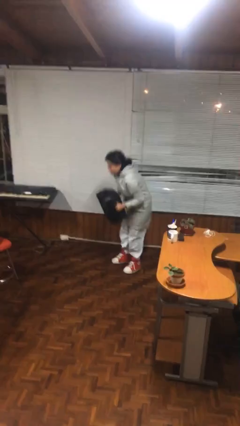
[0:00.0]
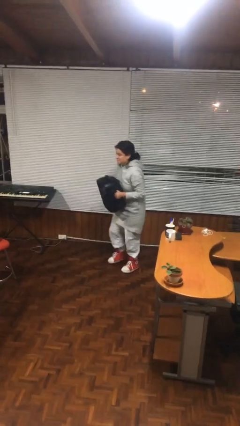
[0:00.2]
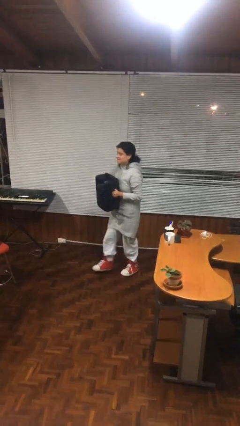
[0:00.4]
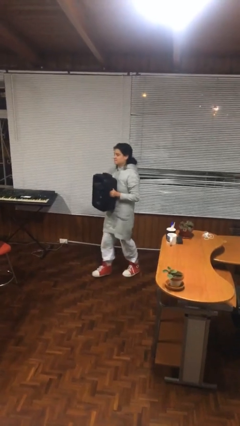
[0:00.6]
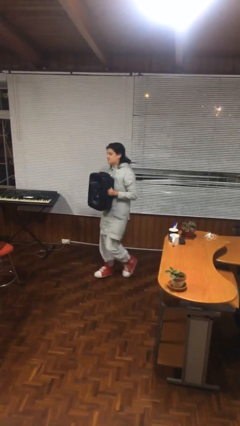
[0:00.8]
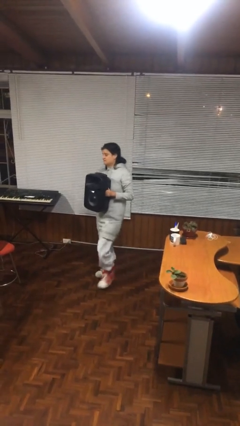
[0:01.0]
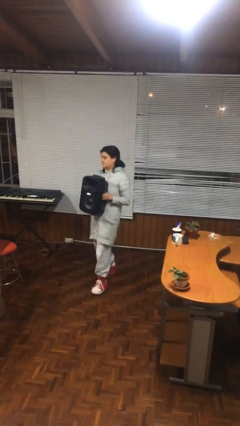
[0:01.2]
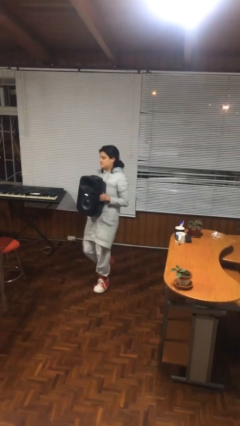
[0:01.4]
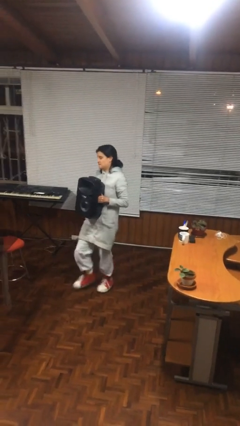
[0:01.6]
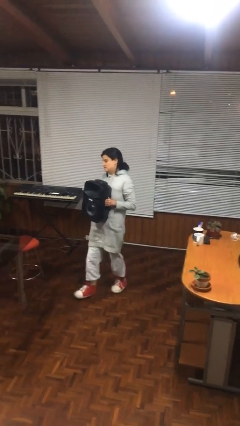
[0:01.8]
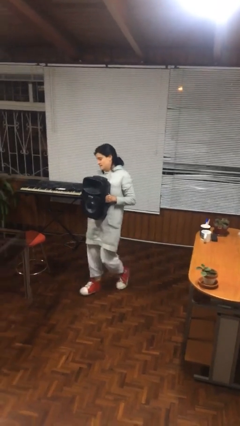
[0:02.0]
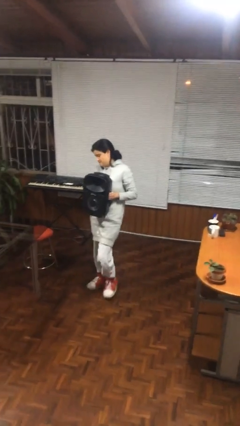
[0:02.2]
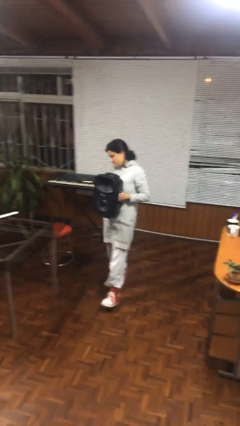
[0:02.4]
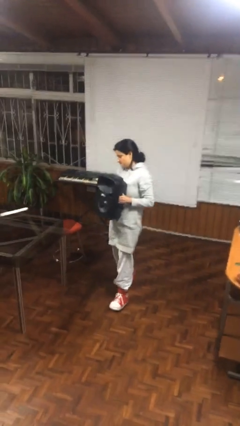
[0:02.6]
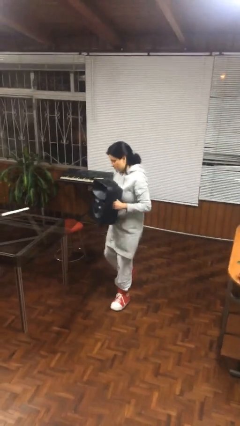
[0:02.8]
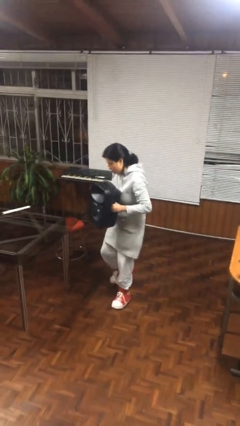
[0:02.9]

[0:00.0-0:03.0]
person carries heavy object

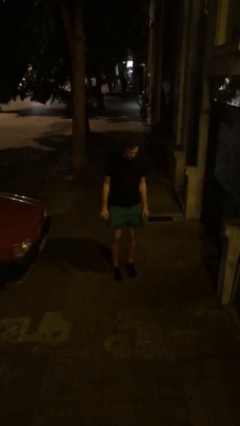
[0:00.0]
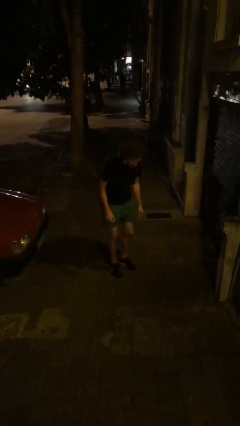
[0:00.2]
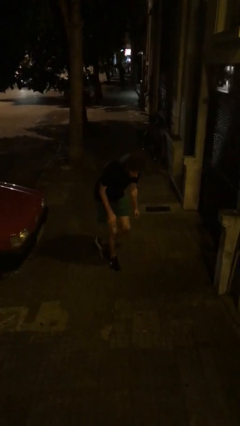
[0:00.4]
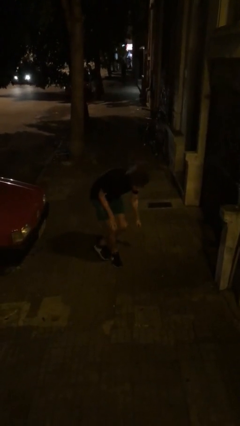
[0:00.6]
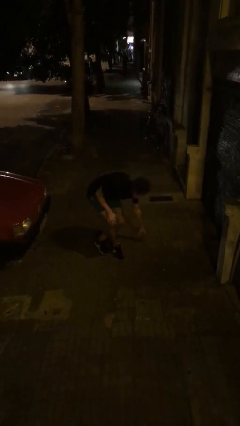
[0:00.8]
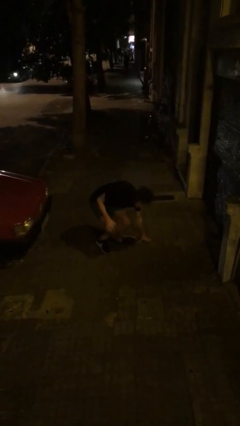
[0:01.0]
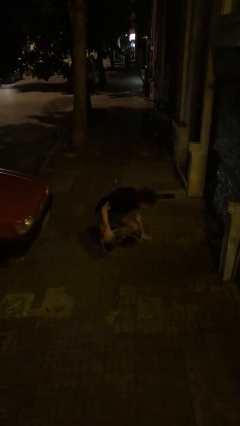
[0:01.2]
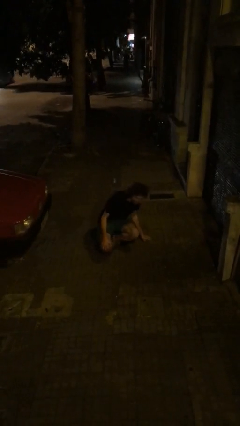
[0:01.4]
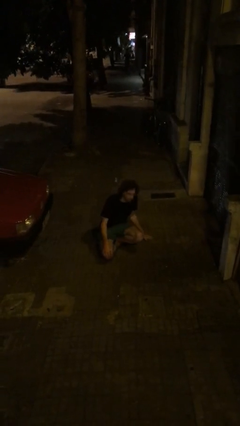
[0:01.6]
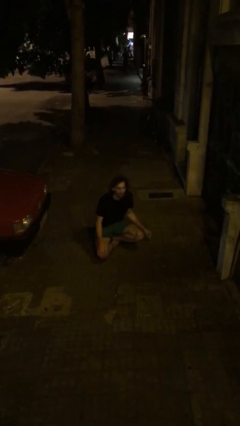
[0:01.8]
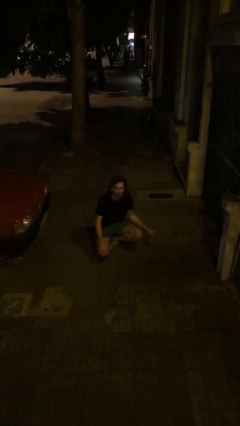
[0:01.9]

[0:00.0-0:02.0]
person sits down

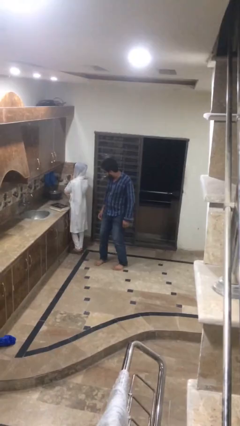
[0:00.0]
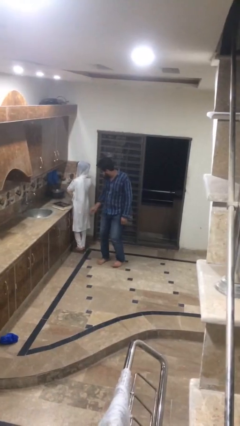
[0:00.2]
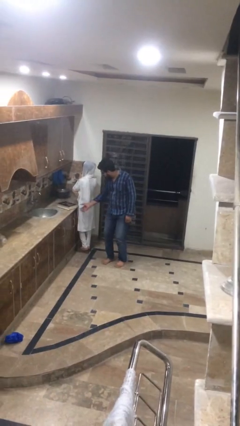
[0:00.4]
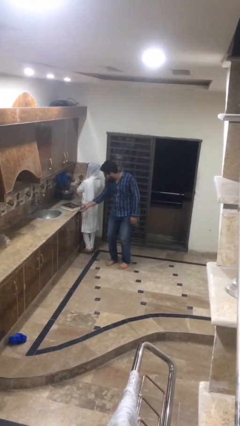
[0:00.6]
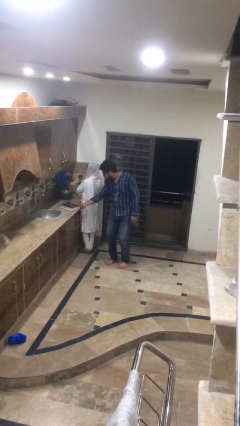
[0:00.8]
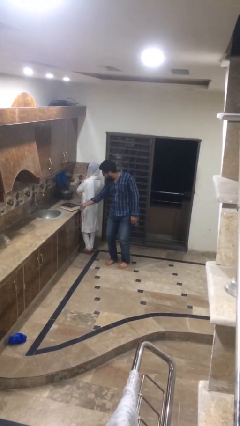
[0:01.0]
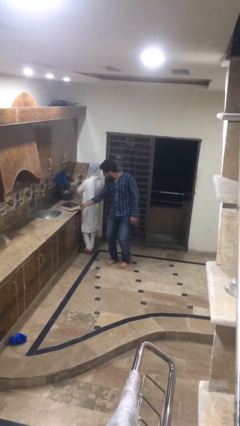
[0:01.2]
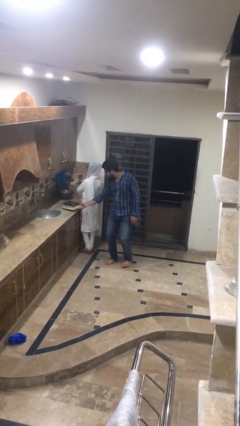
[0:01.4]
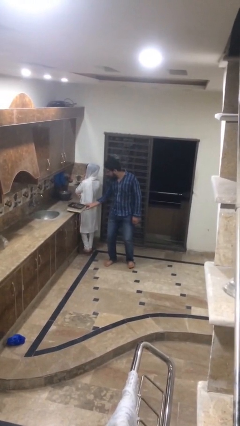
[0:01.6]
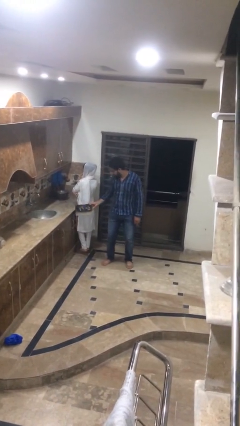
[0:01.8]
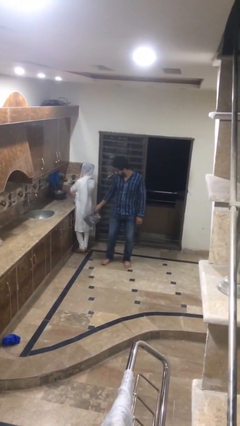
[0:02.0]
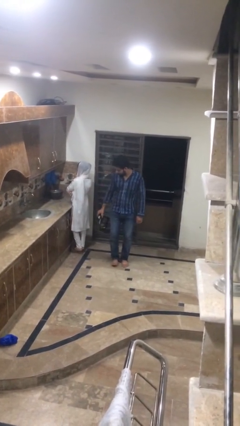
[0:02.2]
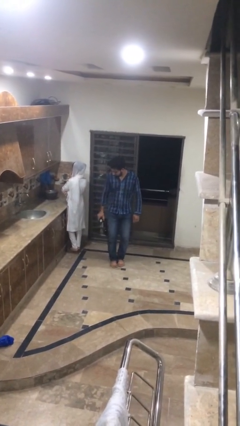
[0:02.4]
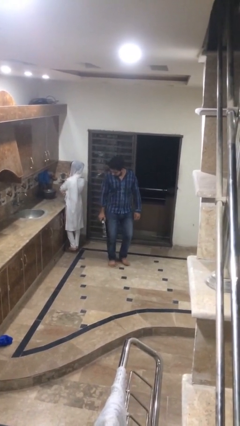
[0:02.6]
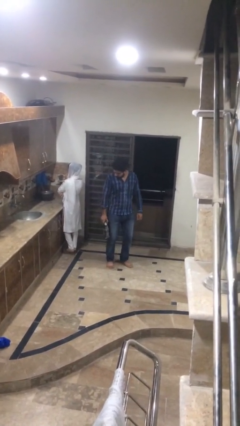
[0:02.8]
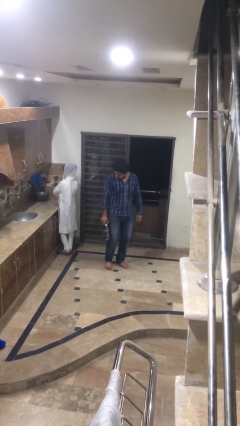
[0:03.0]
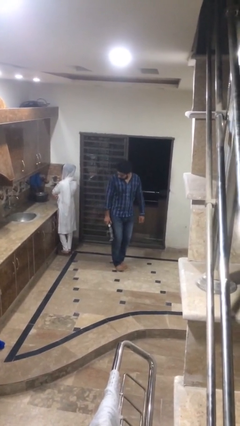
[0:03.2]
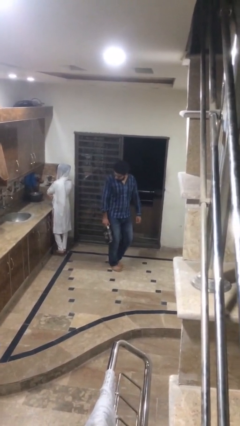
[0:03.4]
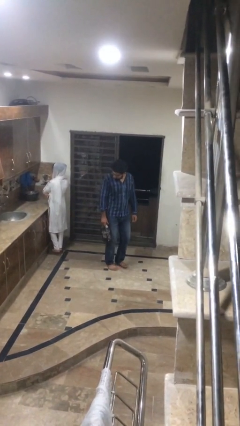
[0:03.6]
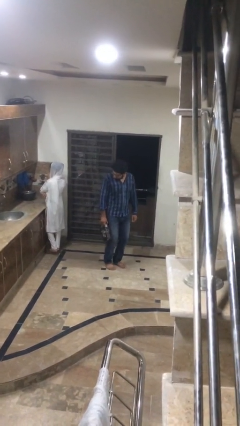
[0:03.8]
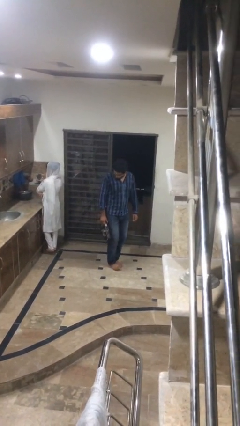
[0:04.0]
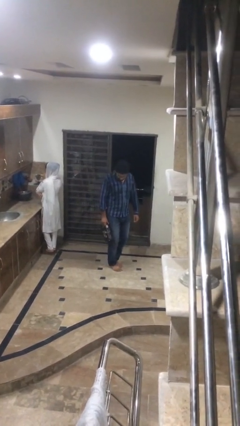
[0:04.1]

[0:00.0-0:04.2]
person steals object from person

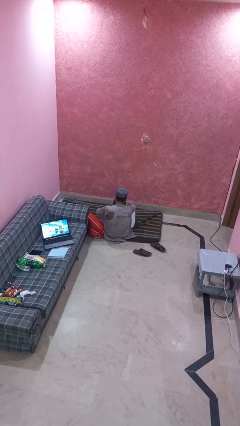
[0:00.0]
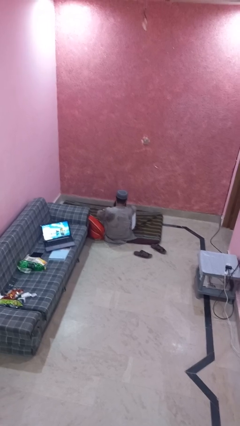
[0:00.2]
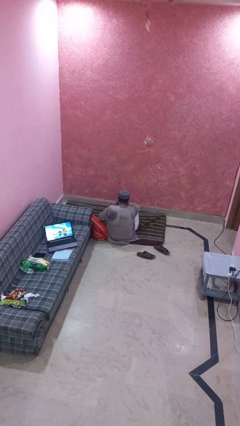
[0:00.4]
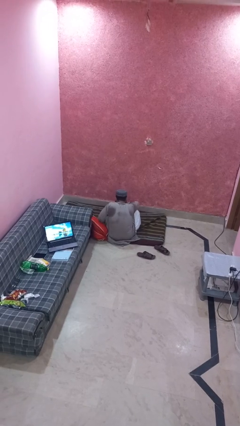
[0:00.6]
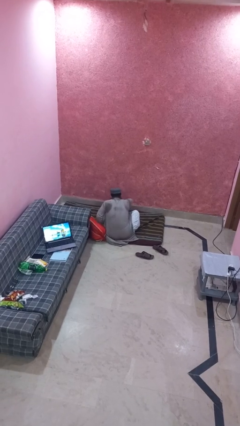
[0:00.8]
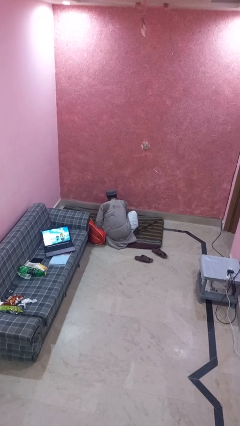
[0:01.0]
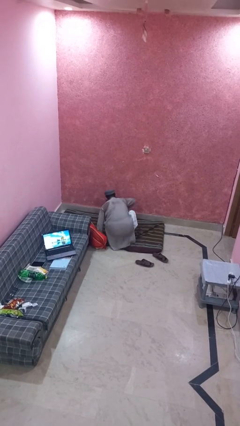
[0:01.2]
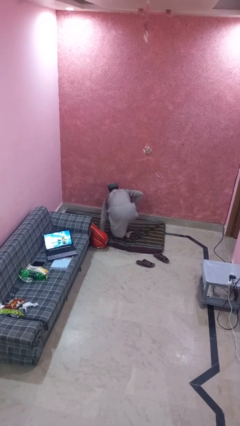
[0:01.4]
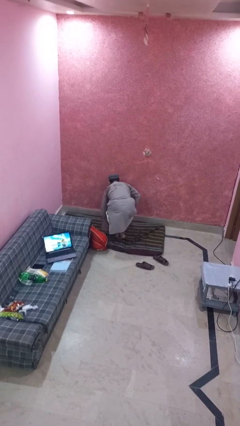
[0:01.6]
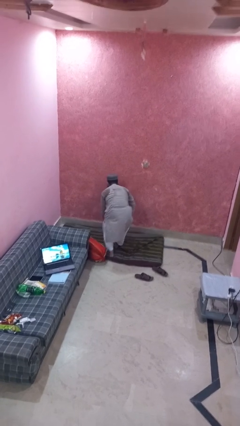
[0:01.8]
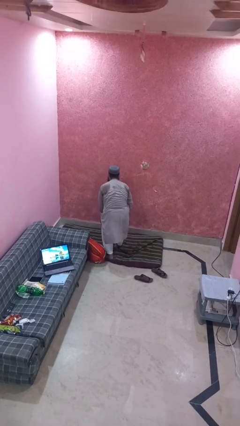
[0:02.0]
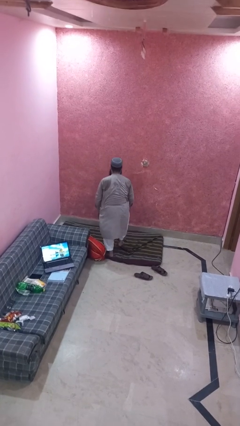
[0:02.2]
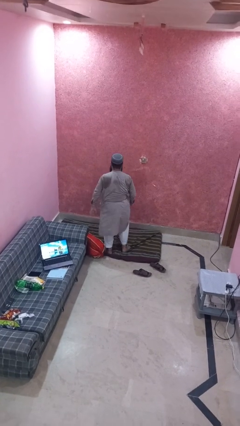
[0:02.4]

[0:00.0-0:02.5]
person stands up from floor

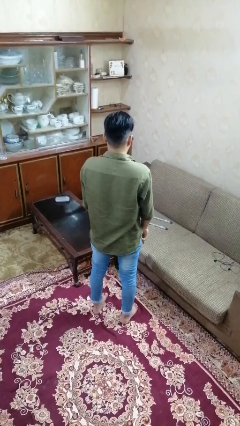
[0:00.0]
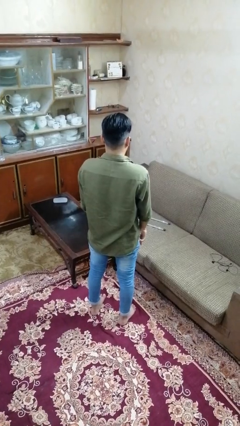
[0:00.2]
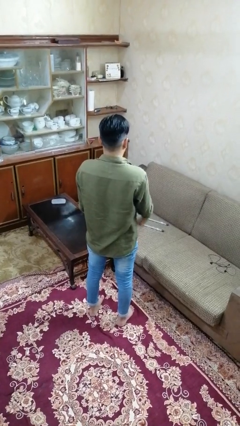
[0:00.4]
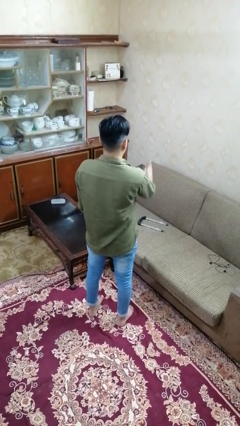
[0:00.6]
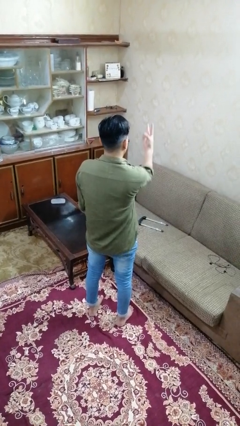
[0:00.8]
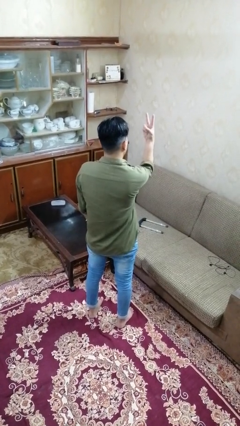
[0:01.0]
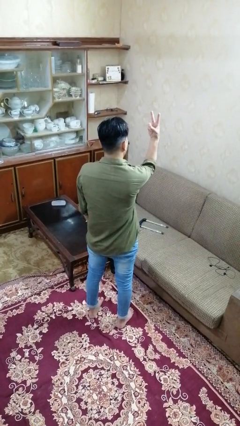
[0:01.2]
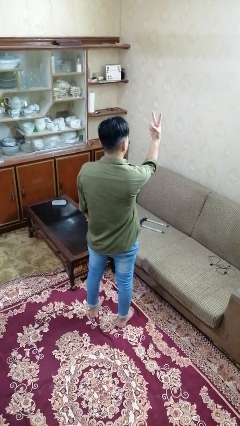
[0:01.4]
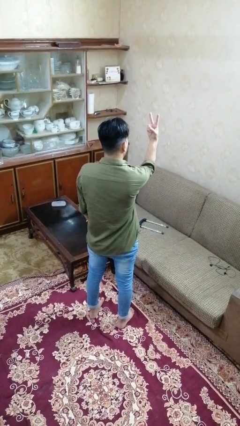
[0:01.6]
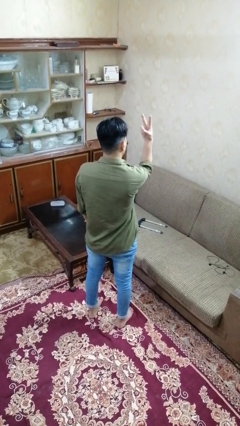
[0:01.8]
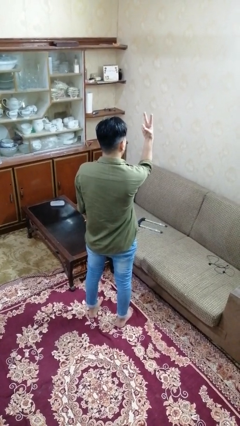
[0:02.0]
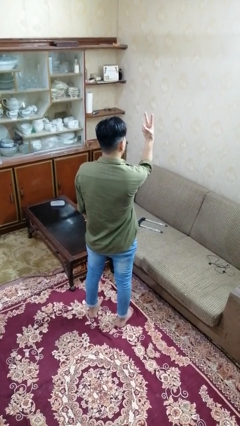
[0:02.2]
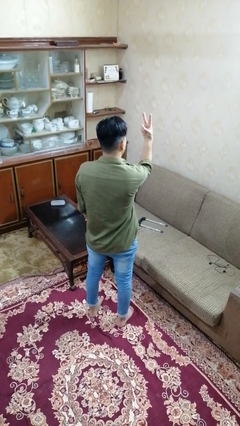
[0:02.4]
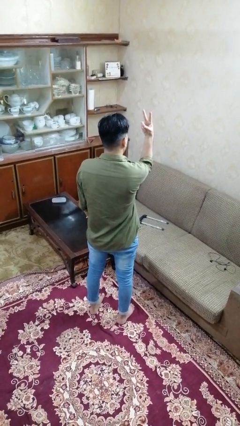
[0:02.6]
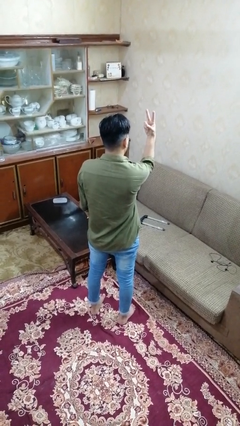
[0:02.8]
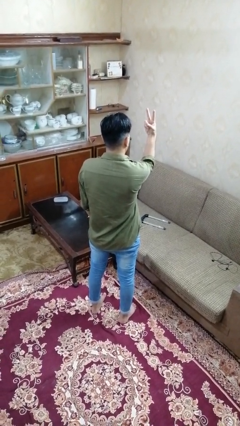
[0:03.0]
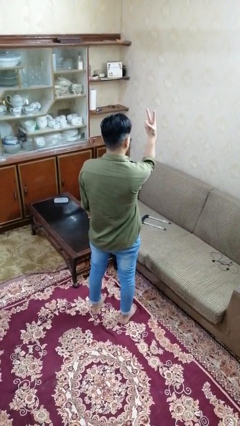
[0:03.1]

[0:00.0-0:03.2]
person gestures peace

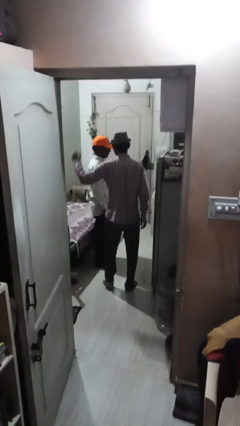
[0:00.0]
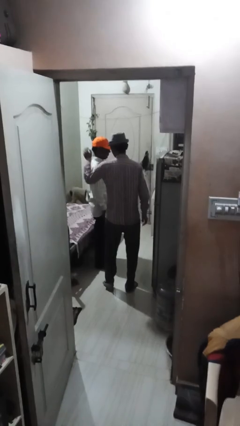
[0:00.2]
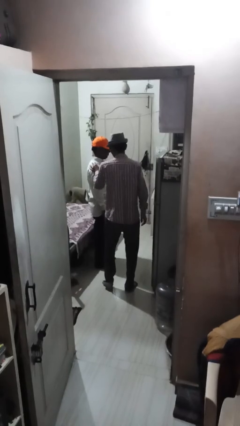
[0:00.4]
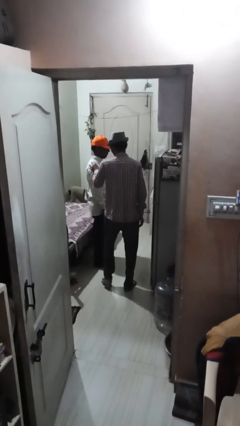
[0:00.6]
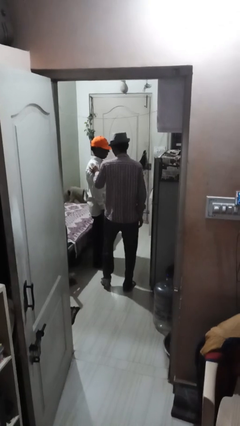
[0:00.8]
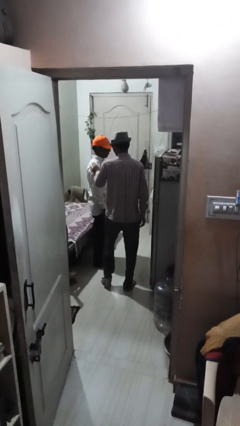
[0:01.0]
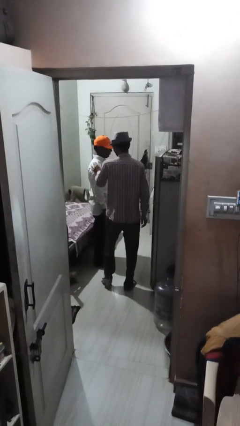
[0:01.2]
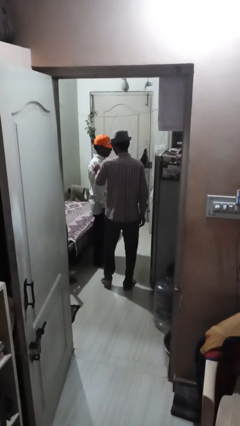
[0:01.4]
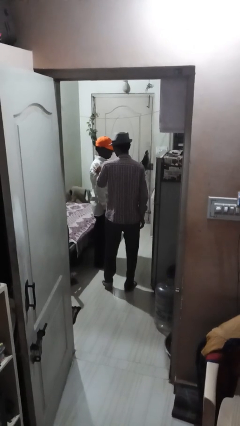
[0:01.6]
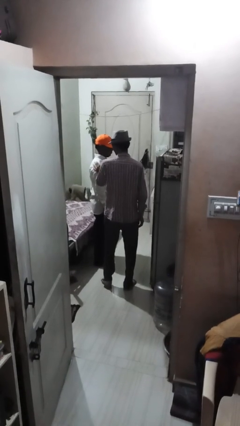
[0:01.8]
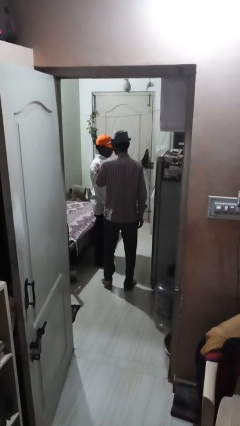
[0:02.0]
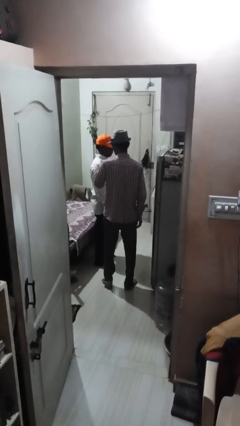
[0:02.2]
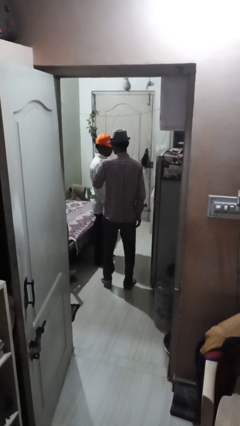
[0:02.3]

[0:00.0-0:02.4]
person pounds shoulders of person
